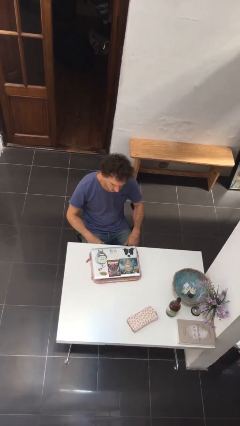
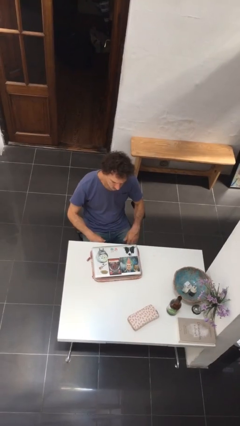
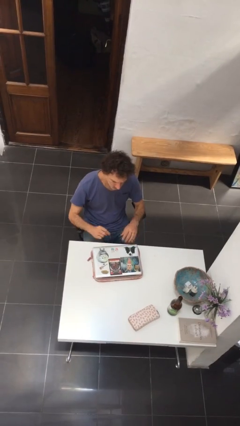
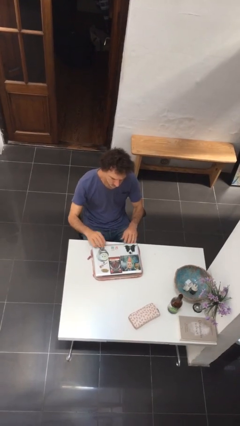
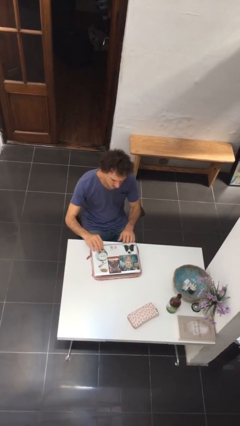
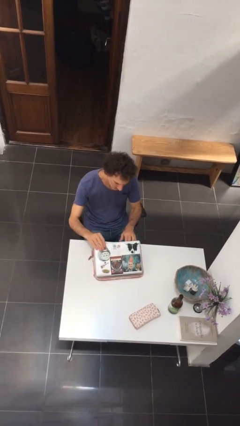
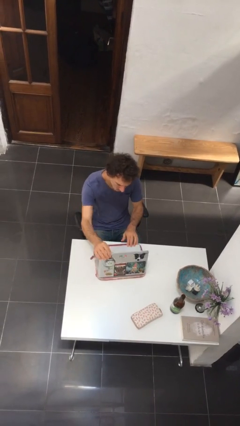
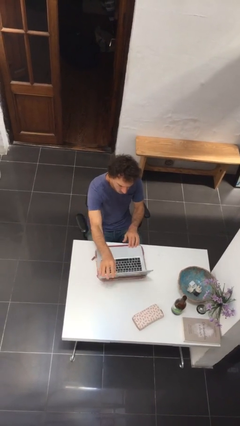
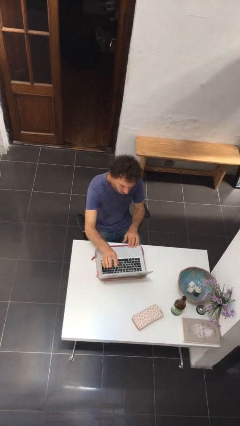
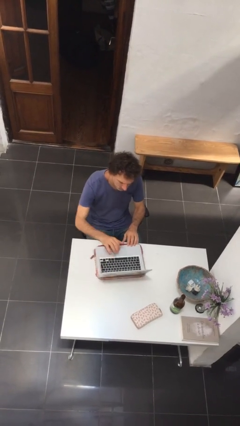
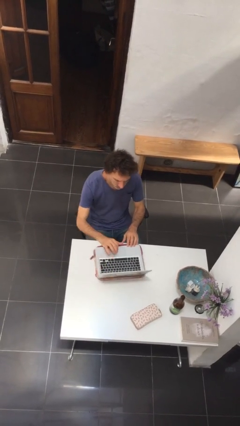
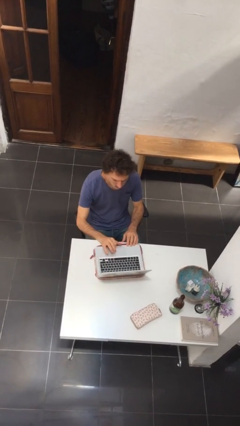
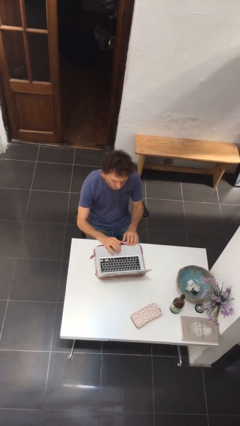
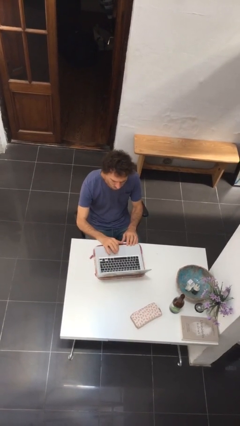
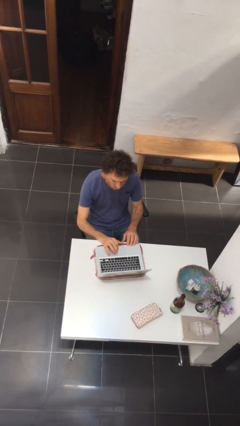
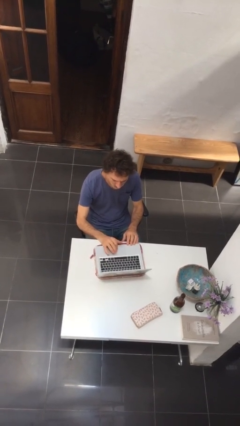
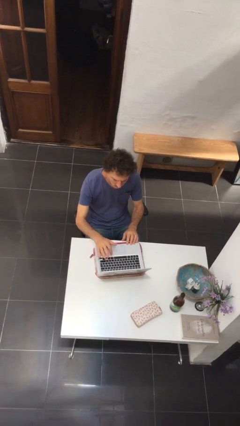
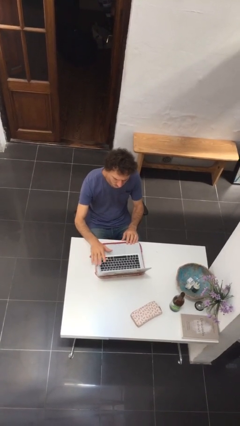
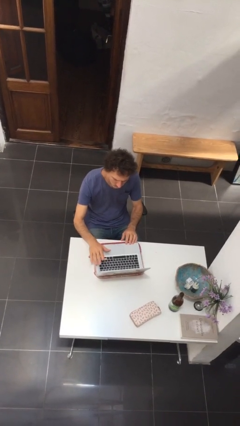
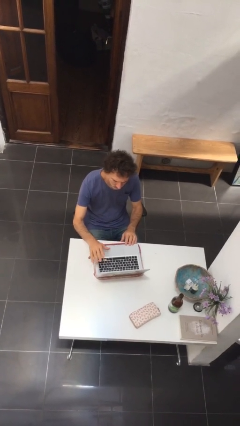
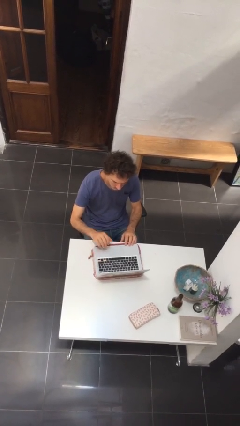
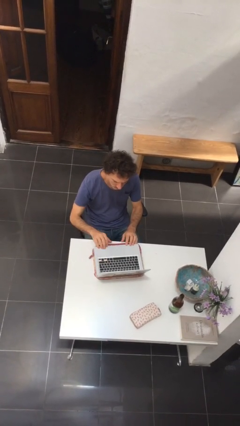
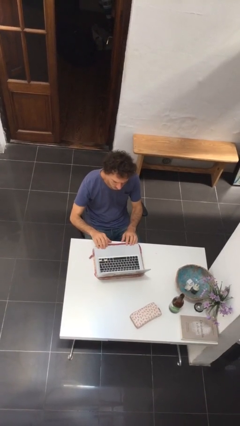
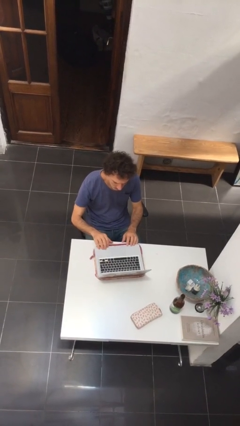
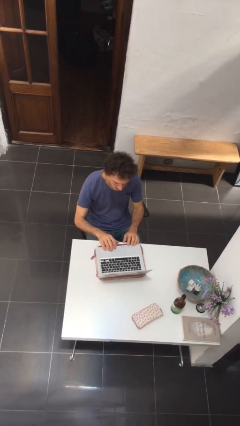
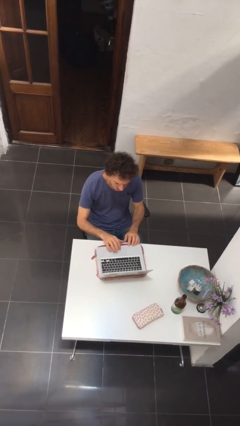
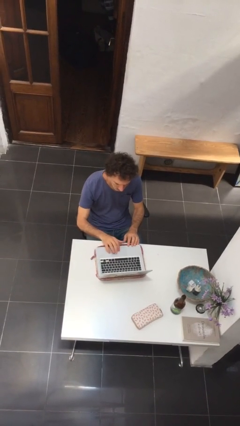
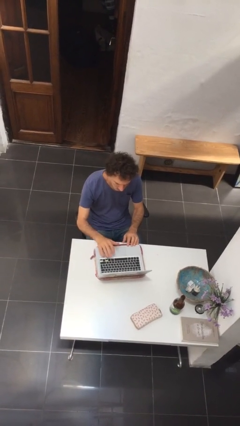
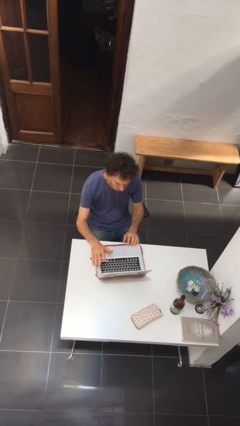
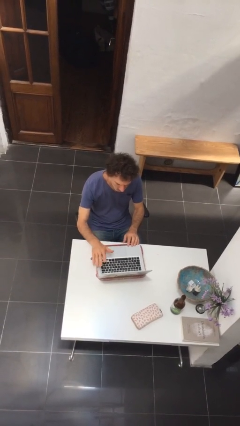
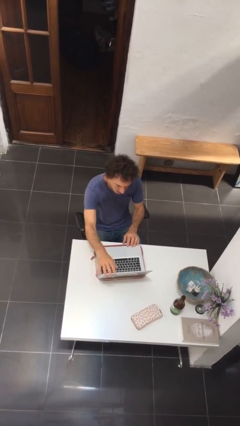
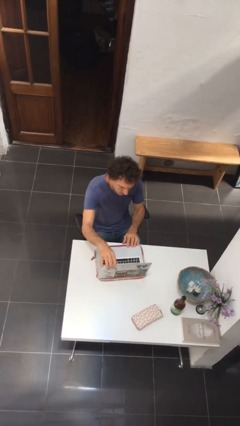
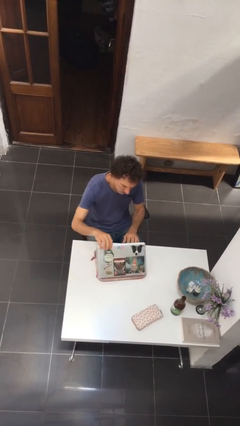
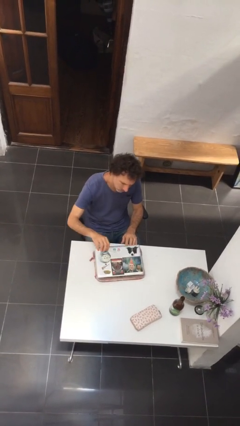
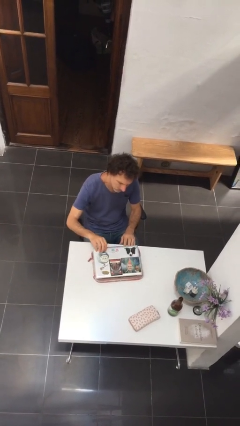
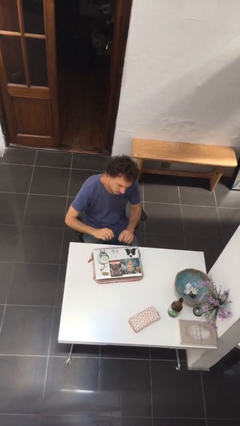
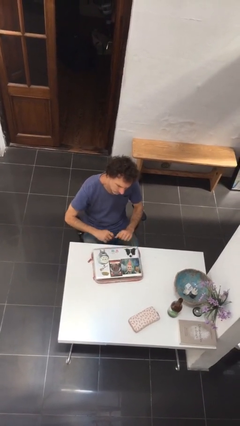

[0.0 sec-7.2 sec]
person interacts with laptop

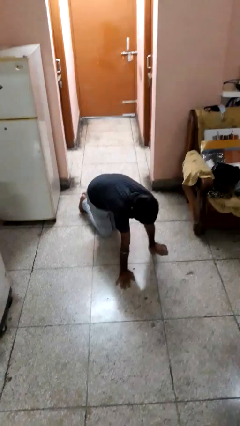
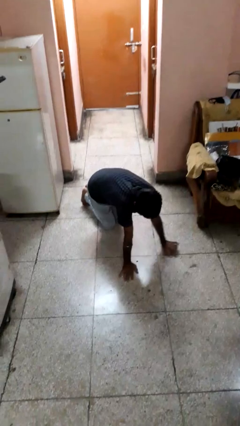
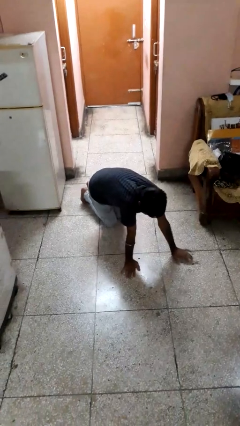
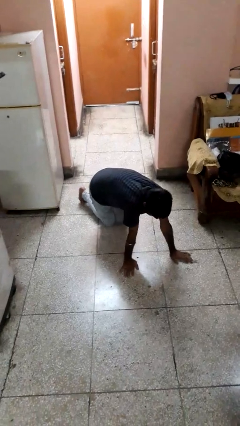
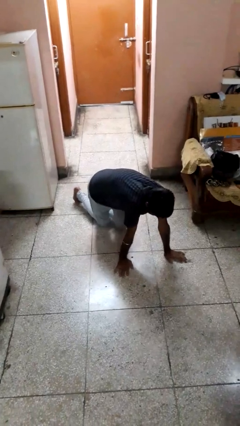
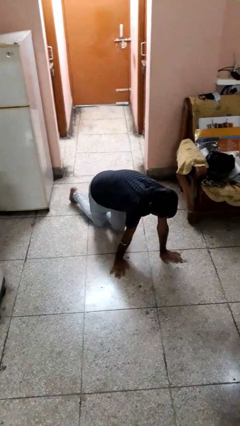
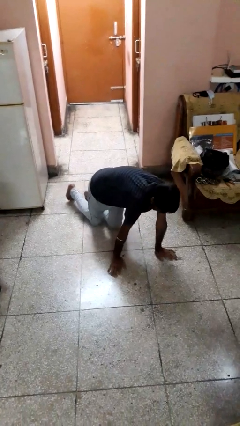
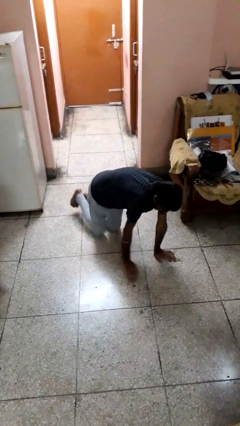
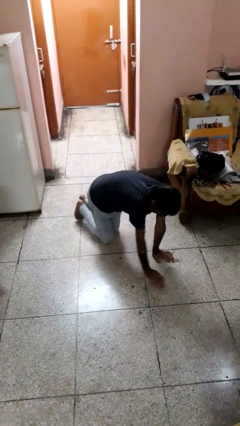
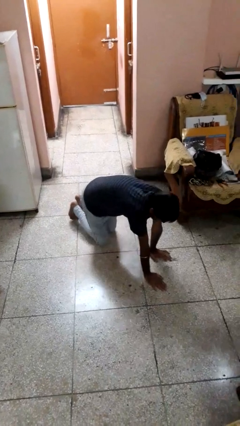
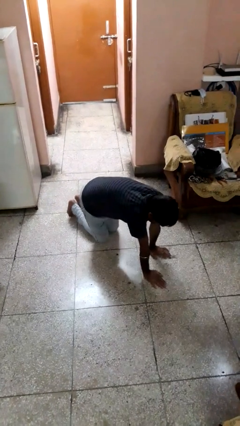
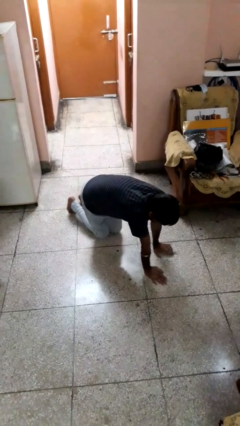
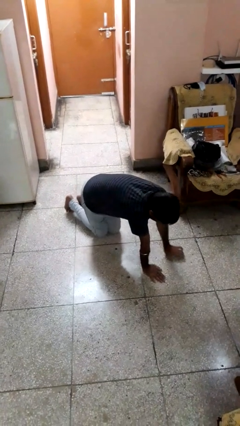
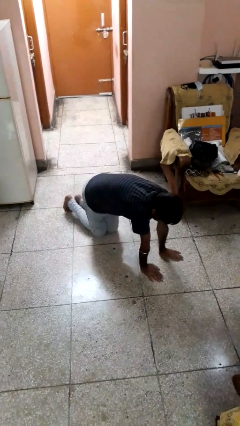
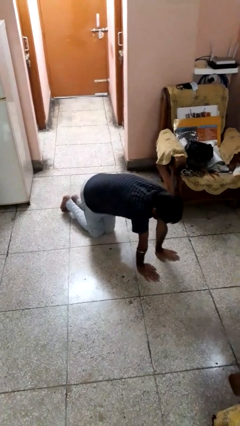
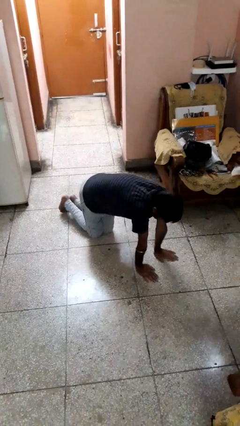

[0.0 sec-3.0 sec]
person crawls

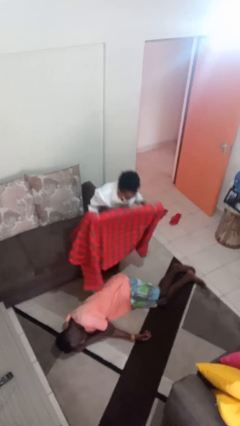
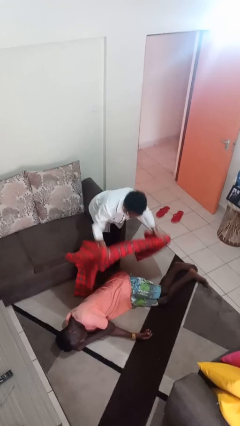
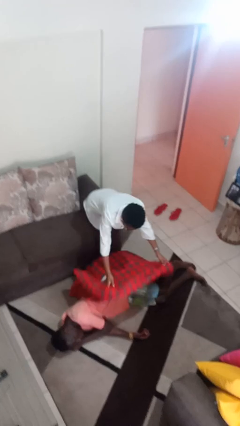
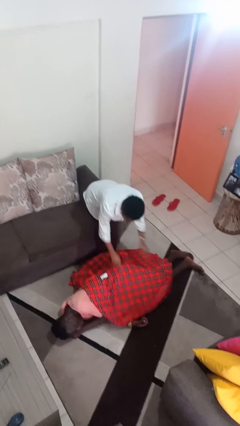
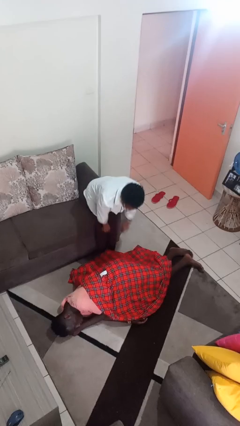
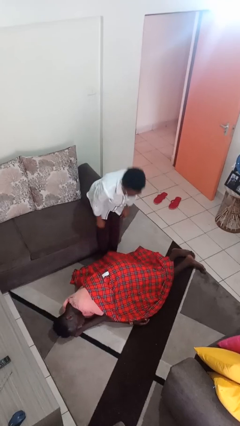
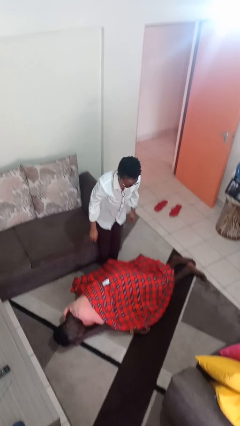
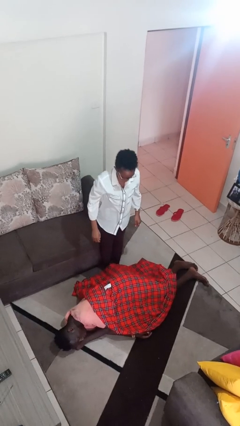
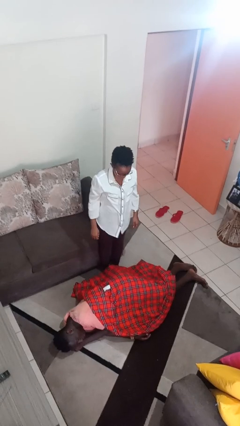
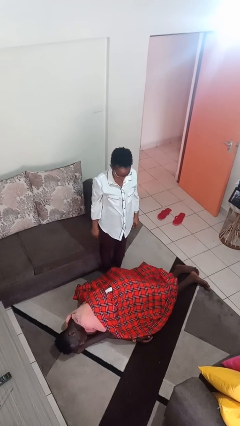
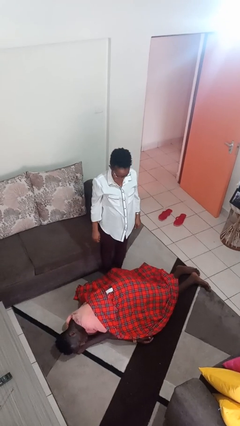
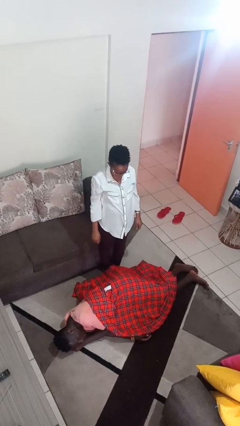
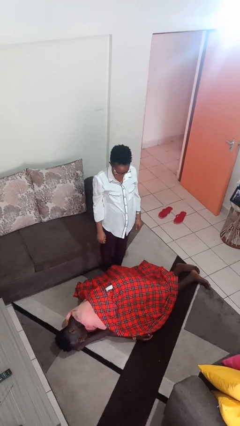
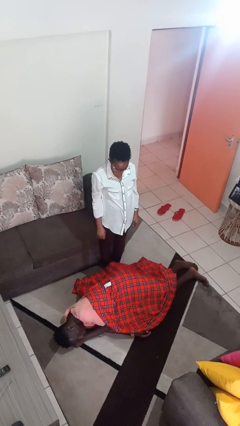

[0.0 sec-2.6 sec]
person covers friend with blanket

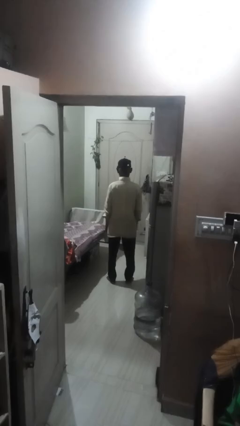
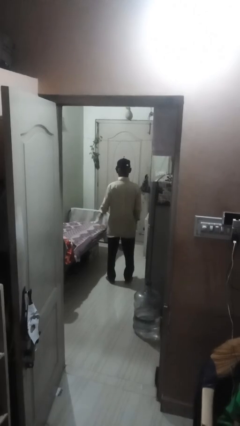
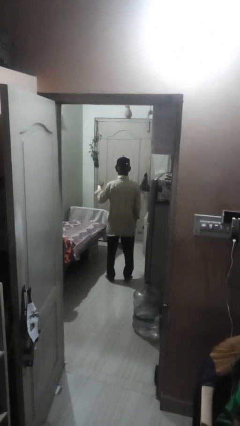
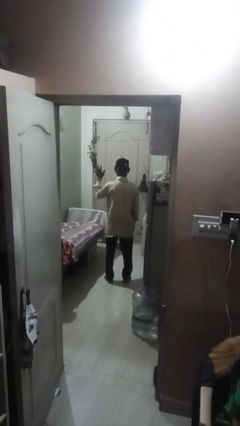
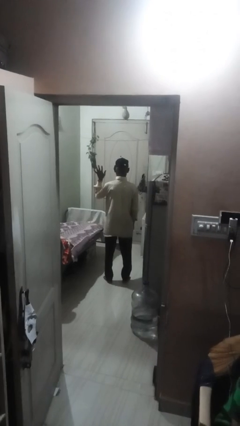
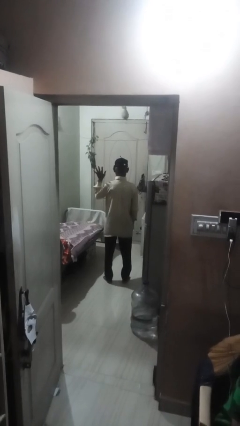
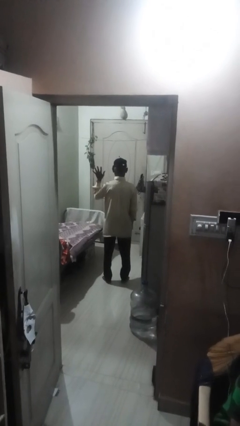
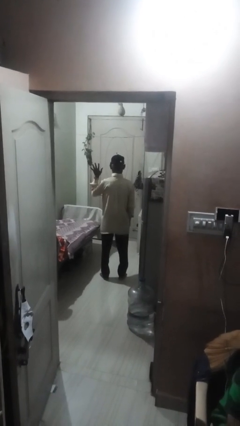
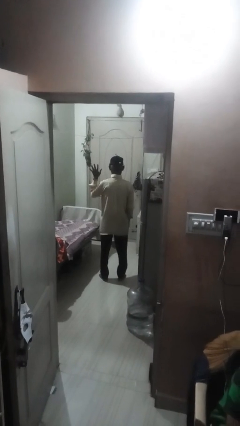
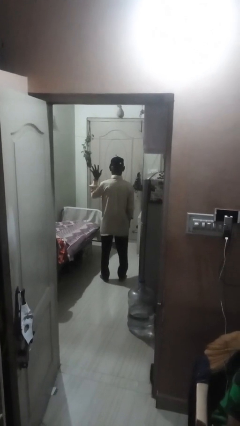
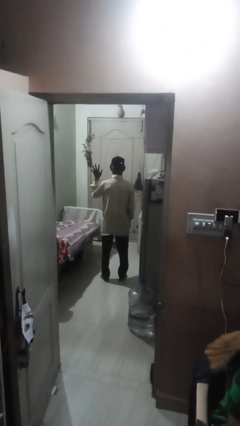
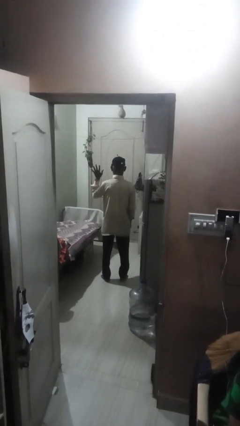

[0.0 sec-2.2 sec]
person gestures number five

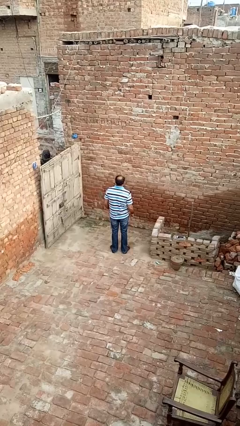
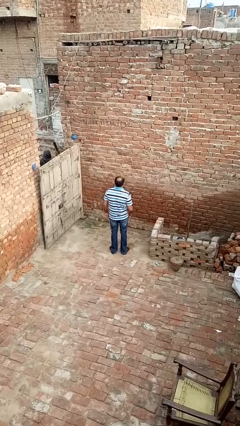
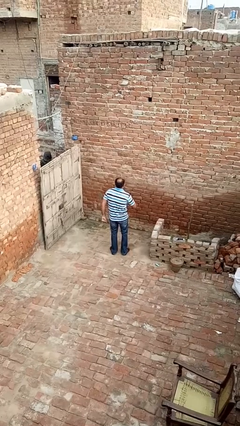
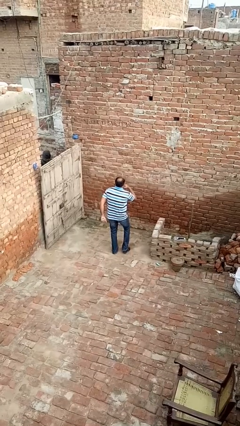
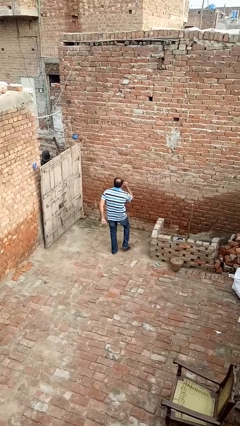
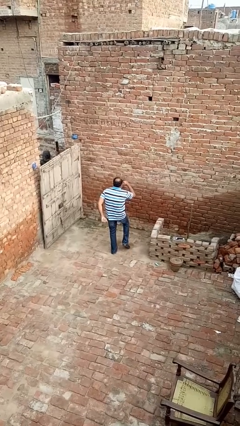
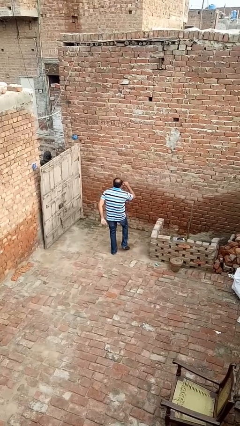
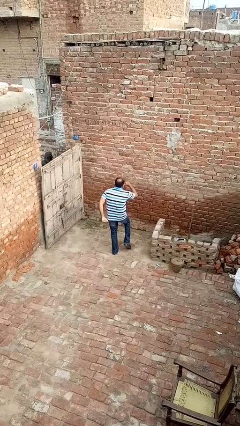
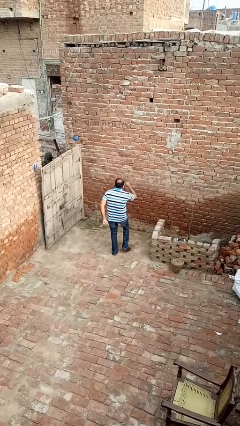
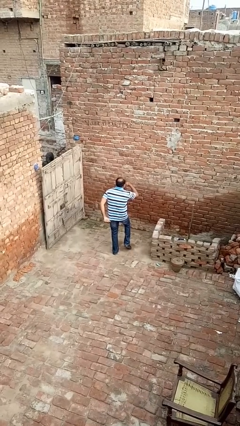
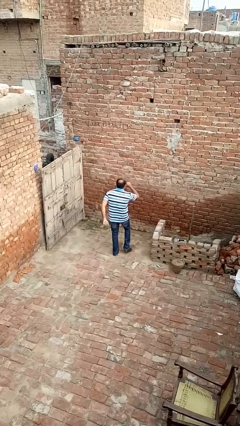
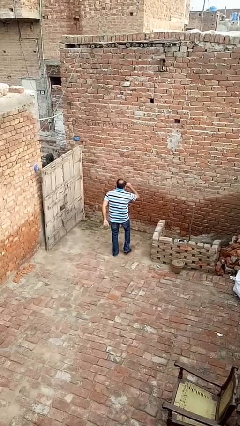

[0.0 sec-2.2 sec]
person dances in place

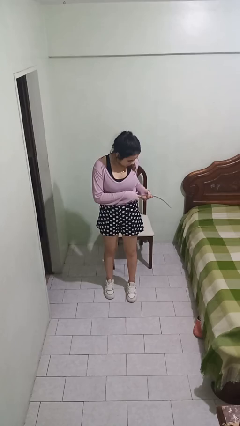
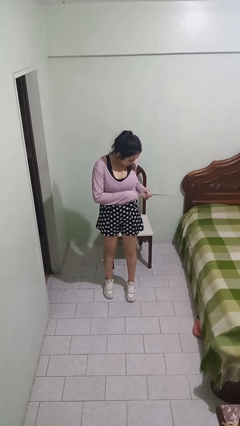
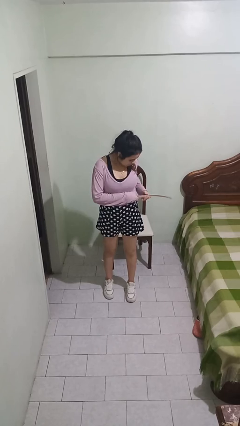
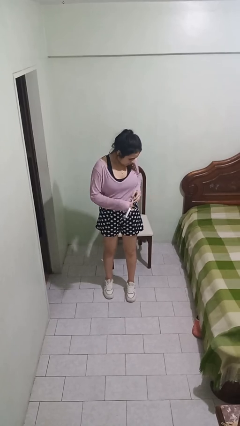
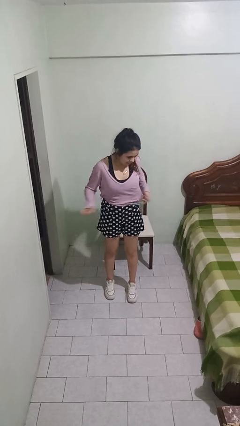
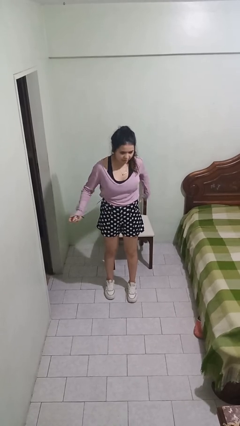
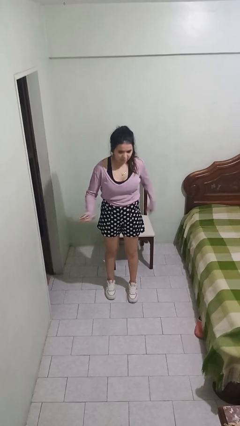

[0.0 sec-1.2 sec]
person takes off belt
